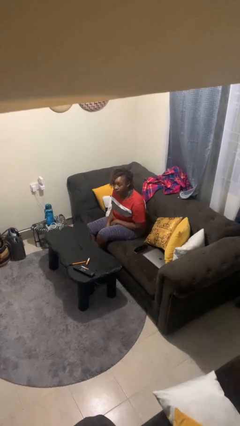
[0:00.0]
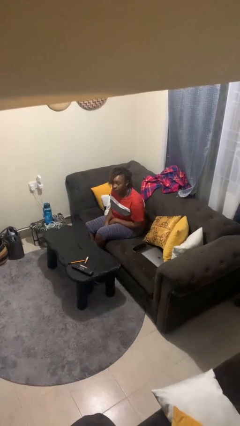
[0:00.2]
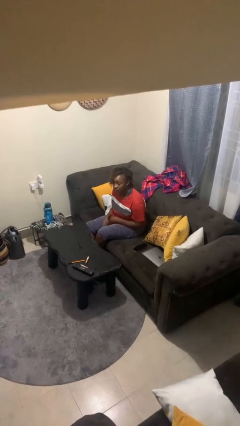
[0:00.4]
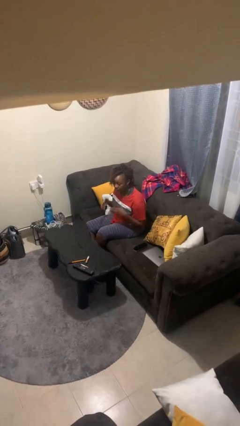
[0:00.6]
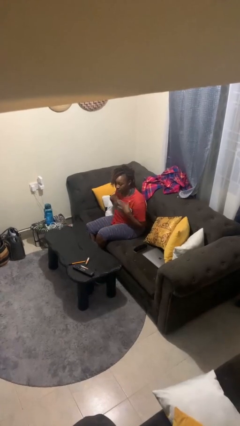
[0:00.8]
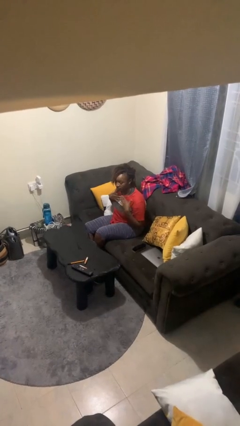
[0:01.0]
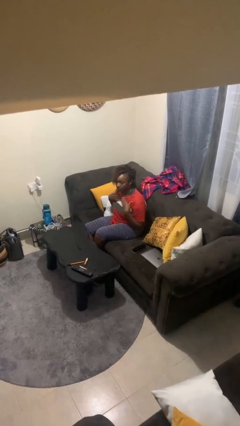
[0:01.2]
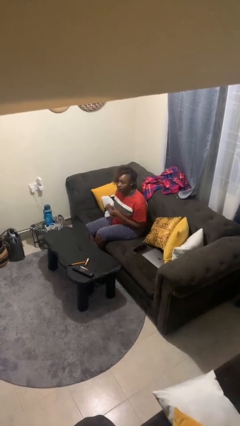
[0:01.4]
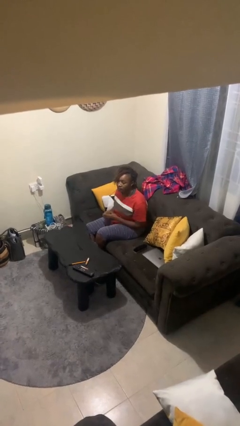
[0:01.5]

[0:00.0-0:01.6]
person drums on chest

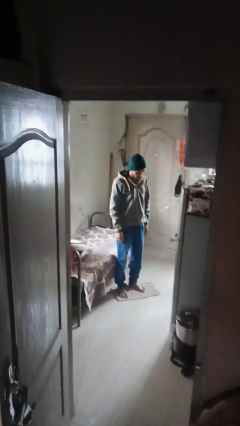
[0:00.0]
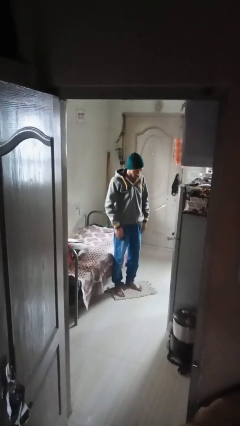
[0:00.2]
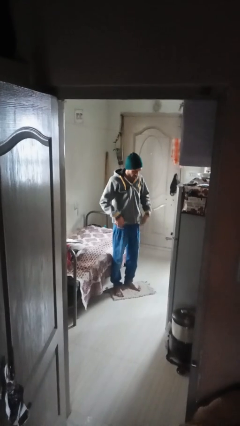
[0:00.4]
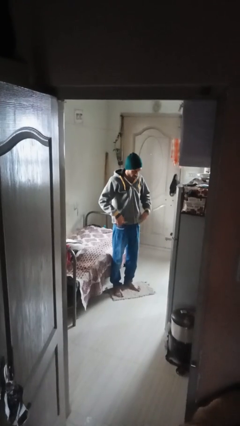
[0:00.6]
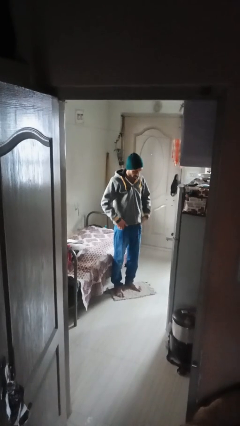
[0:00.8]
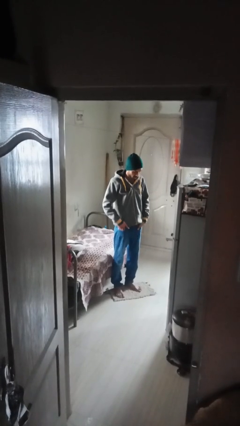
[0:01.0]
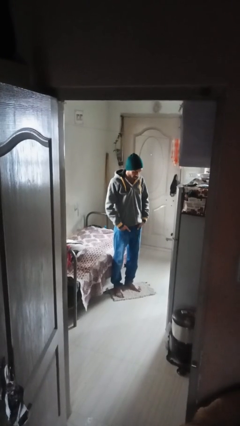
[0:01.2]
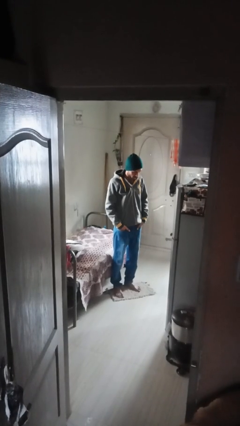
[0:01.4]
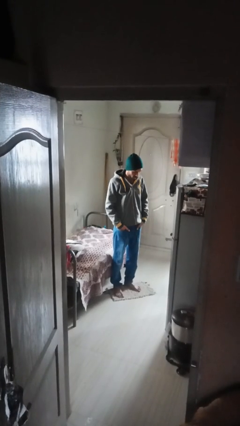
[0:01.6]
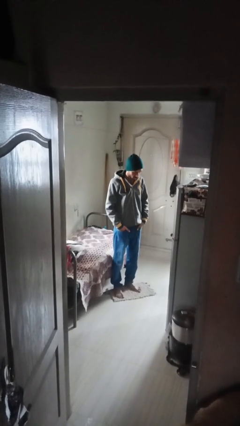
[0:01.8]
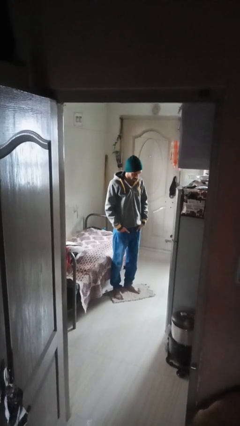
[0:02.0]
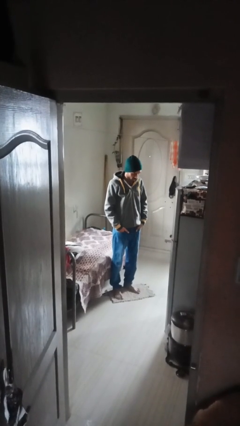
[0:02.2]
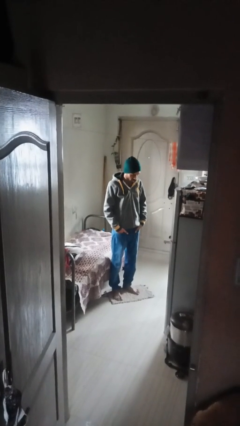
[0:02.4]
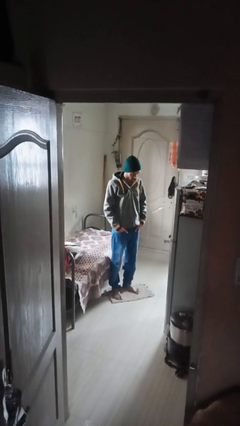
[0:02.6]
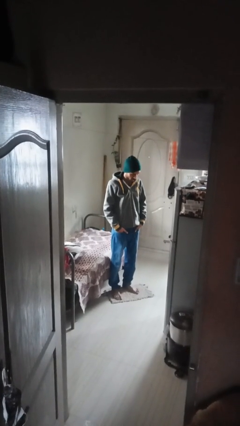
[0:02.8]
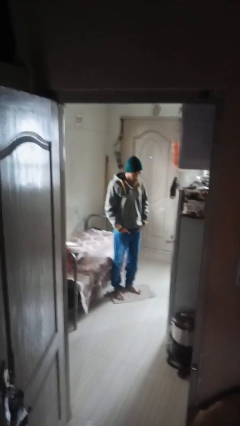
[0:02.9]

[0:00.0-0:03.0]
person puts hands in back pockets

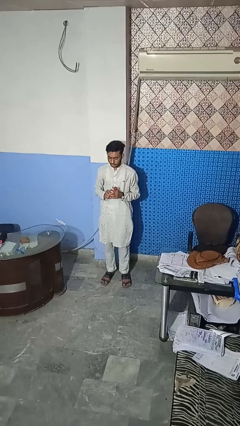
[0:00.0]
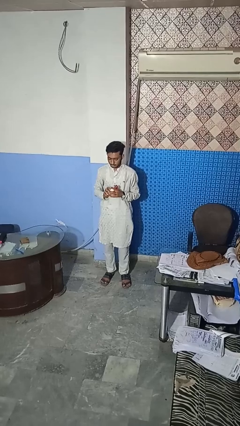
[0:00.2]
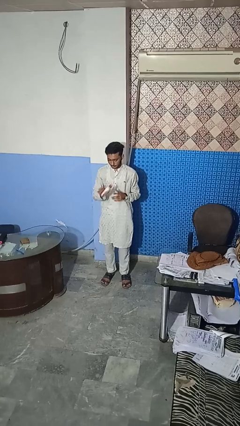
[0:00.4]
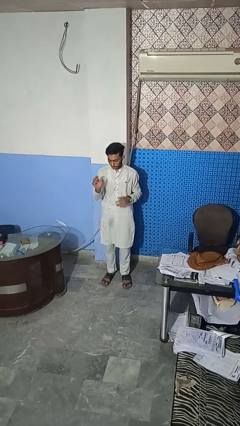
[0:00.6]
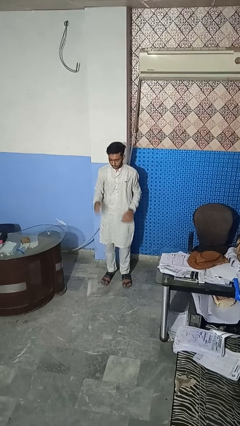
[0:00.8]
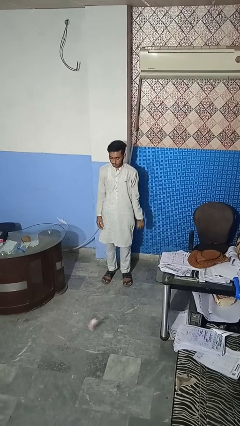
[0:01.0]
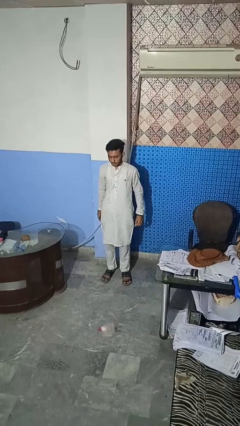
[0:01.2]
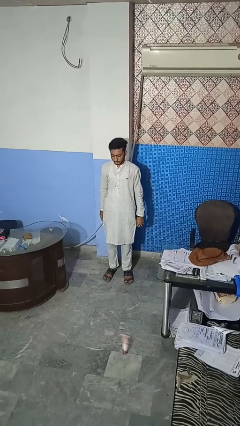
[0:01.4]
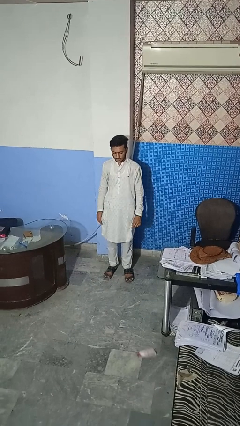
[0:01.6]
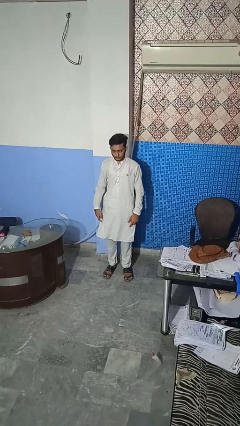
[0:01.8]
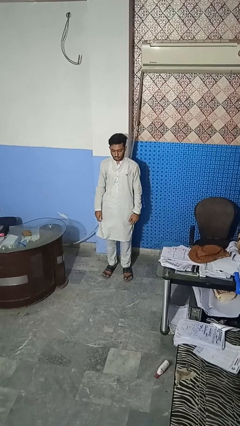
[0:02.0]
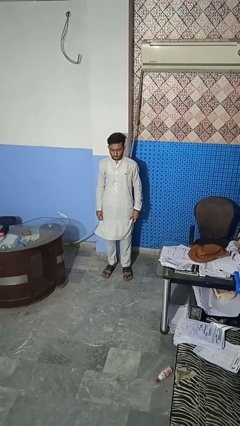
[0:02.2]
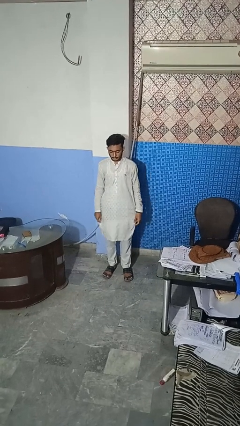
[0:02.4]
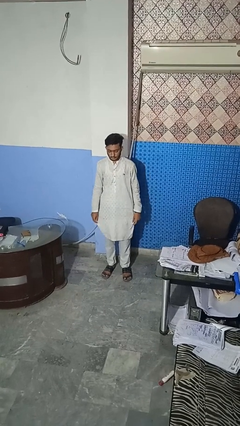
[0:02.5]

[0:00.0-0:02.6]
person throws object to ground

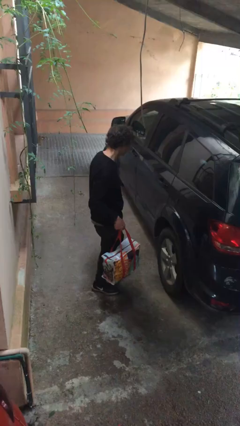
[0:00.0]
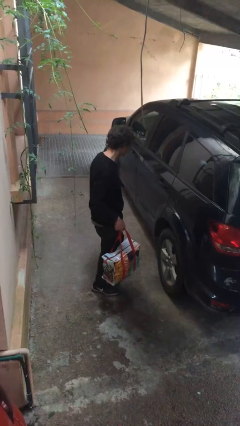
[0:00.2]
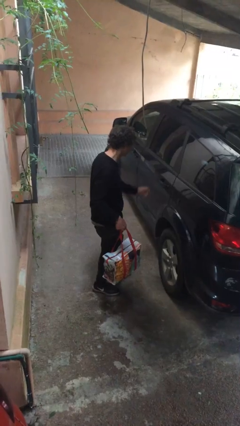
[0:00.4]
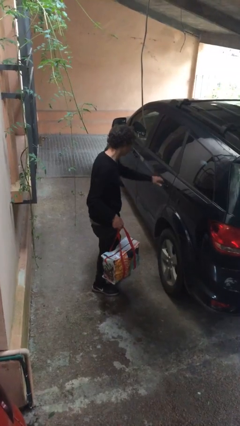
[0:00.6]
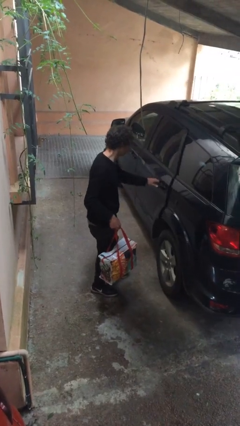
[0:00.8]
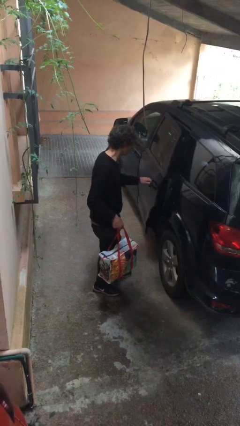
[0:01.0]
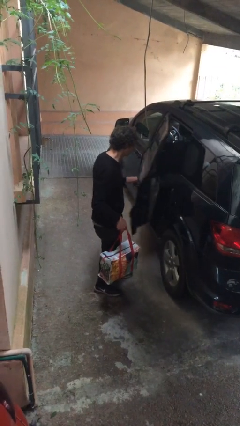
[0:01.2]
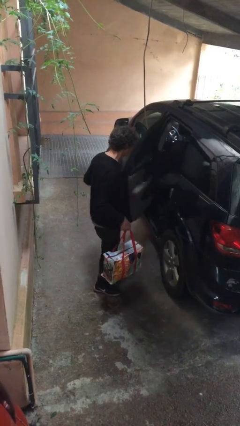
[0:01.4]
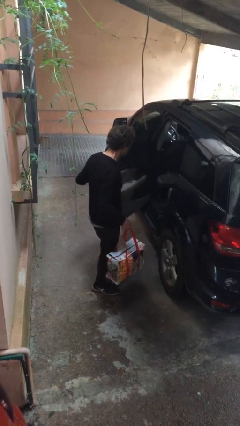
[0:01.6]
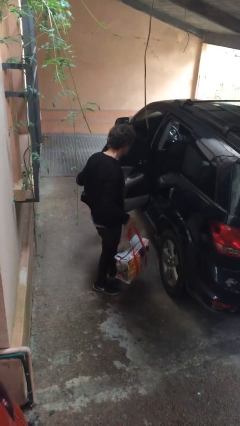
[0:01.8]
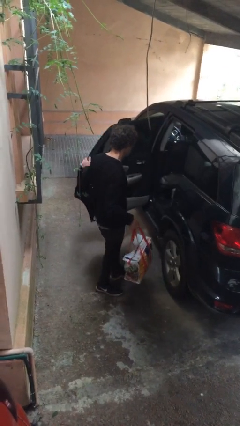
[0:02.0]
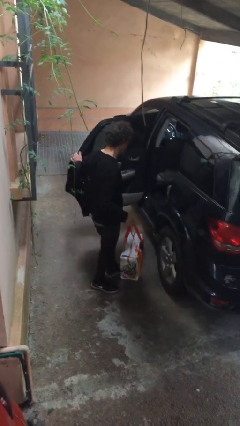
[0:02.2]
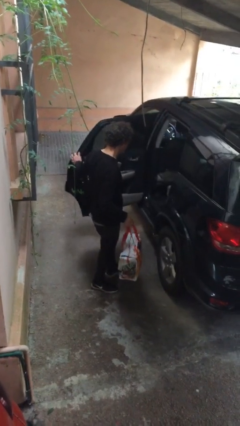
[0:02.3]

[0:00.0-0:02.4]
person opens car door

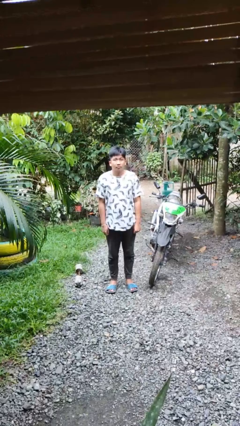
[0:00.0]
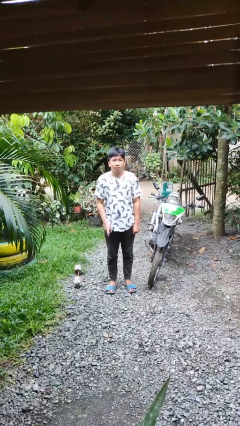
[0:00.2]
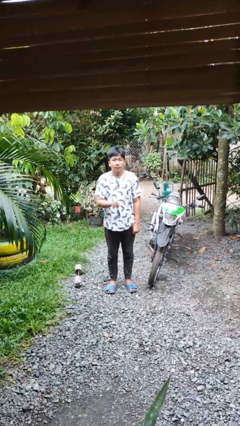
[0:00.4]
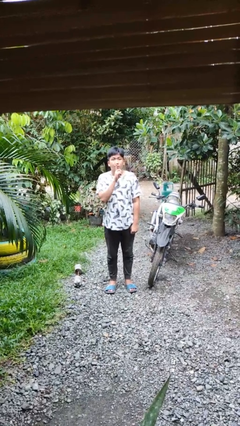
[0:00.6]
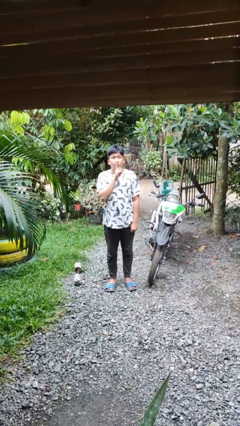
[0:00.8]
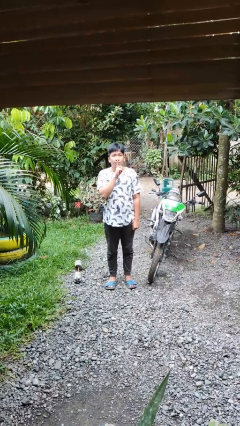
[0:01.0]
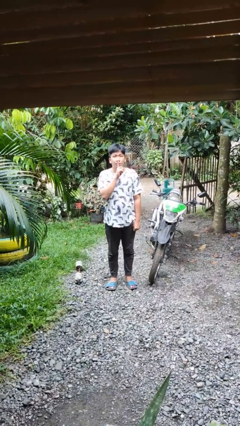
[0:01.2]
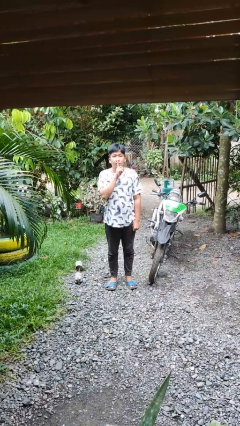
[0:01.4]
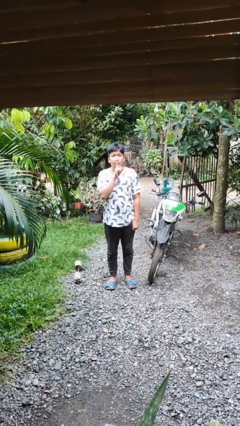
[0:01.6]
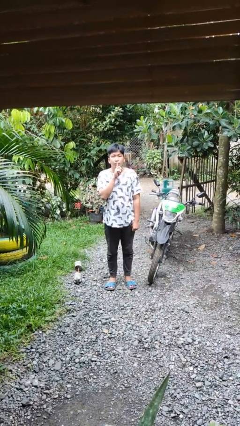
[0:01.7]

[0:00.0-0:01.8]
person gestures be quiet

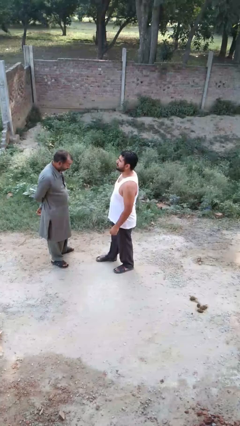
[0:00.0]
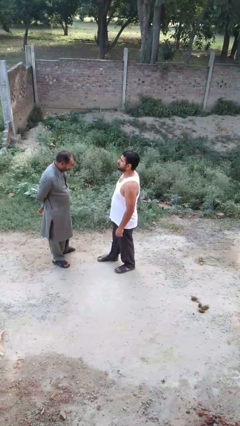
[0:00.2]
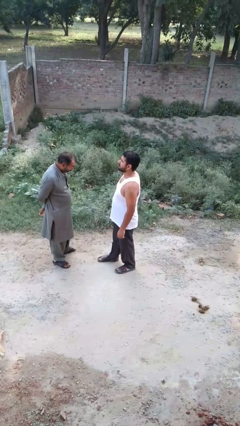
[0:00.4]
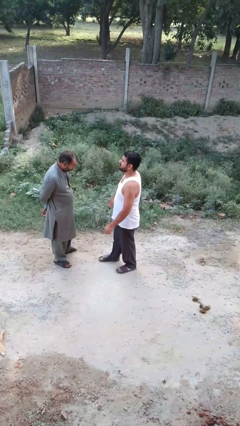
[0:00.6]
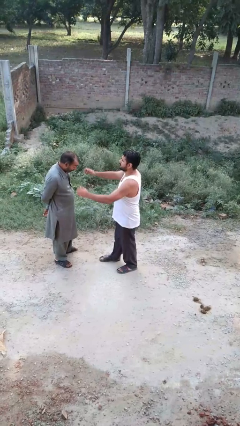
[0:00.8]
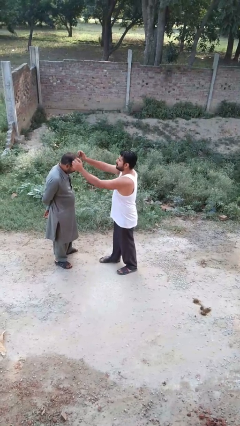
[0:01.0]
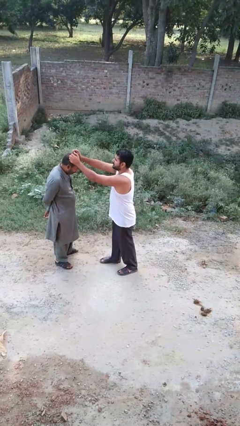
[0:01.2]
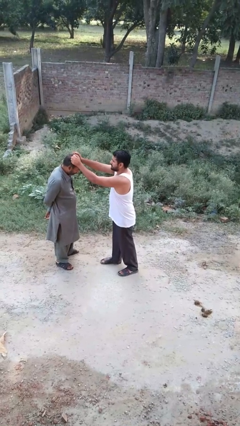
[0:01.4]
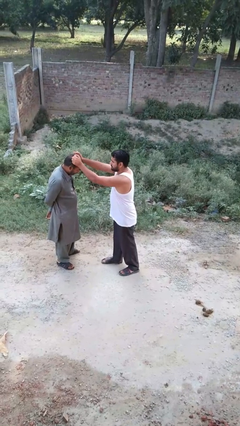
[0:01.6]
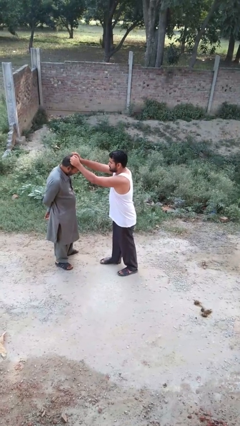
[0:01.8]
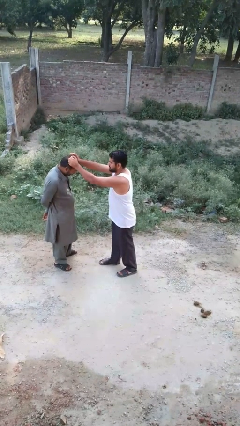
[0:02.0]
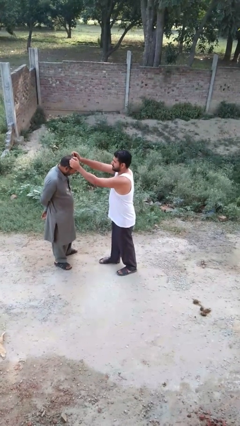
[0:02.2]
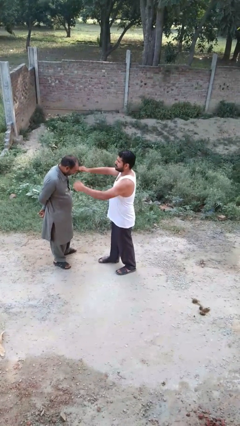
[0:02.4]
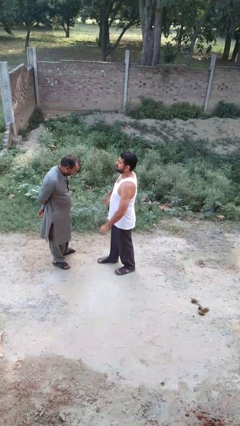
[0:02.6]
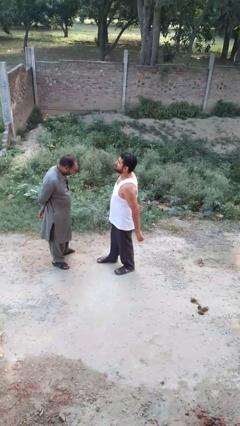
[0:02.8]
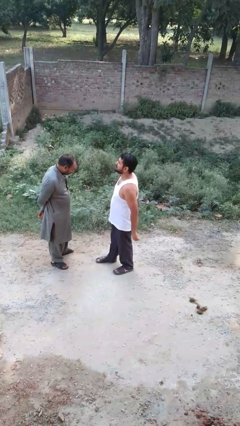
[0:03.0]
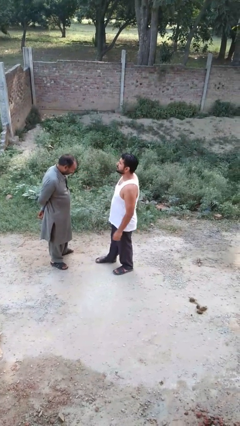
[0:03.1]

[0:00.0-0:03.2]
person grabs person by hair

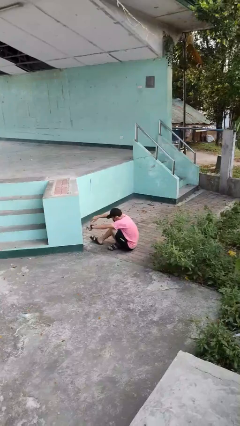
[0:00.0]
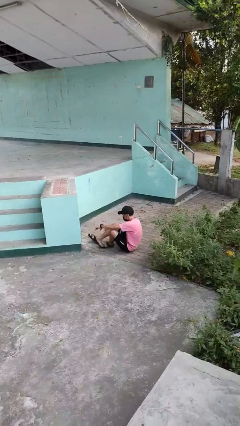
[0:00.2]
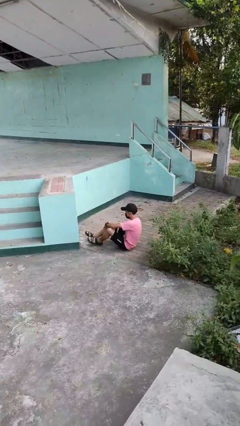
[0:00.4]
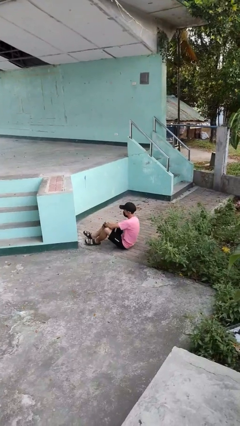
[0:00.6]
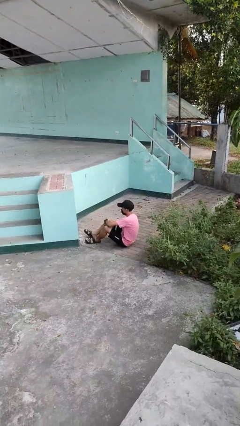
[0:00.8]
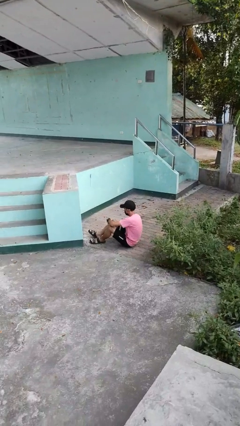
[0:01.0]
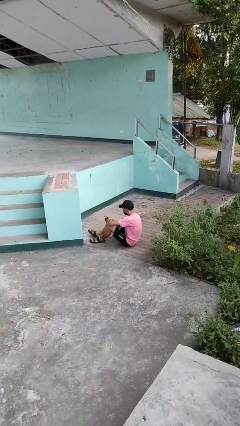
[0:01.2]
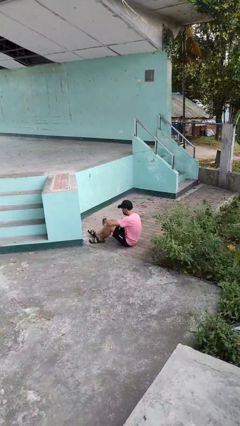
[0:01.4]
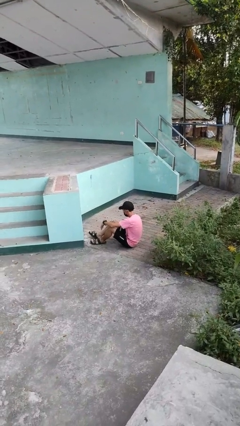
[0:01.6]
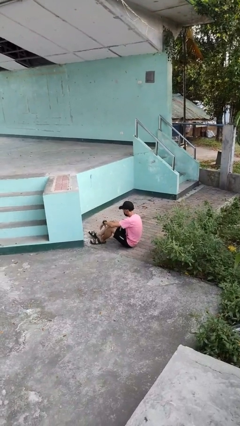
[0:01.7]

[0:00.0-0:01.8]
person lies down on floor

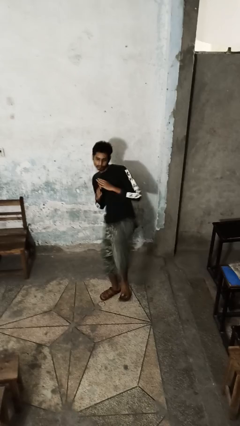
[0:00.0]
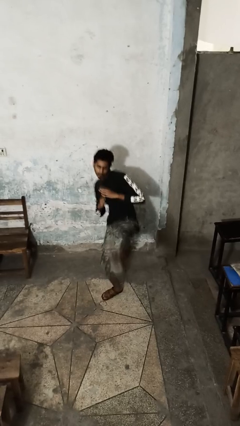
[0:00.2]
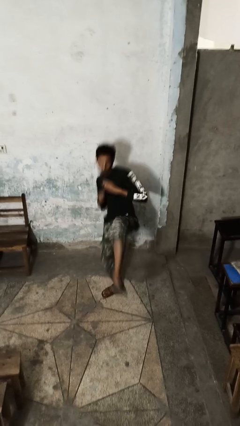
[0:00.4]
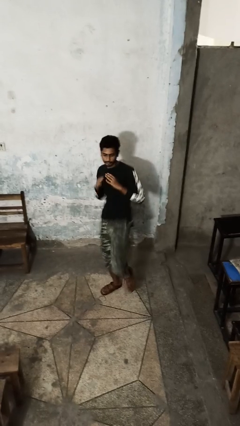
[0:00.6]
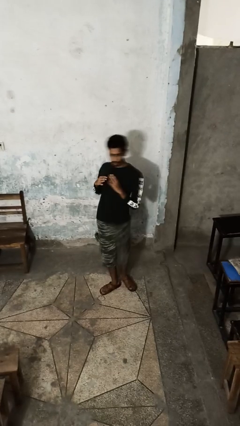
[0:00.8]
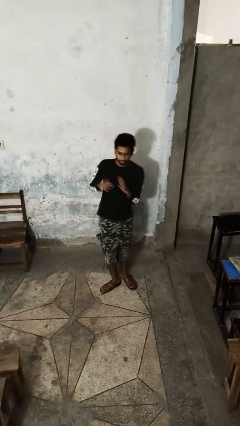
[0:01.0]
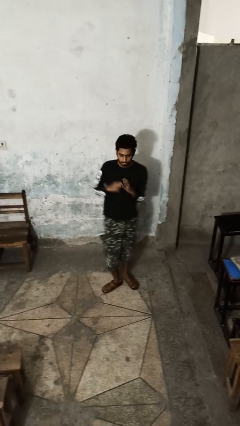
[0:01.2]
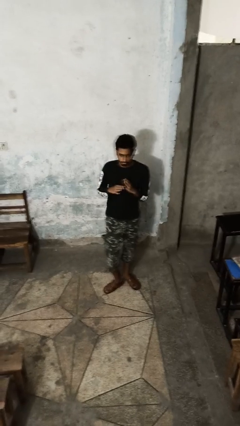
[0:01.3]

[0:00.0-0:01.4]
person karate kicks
